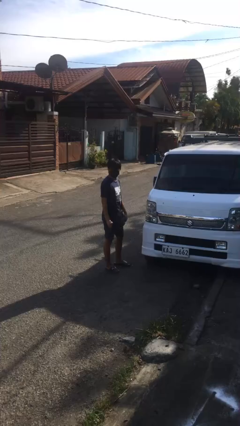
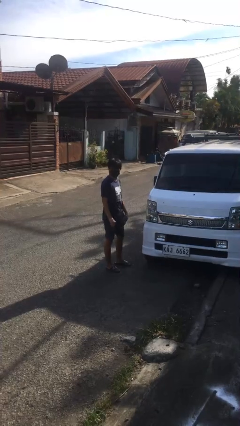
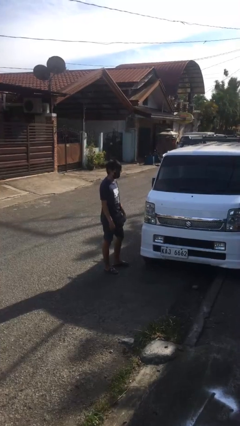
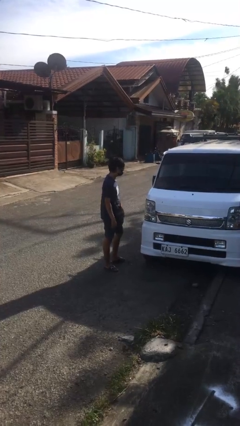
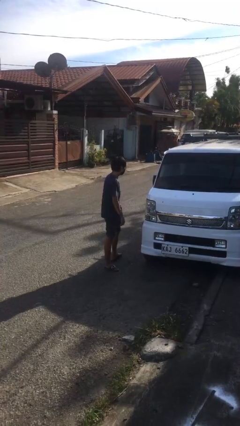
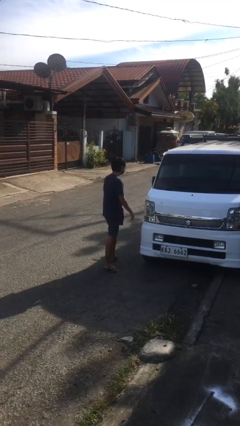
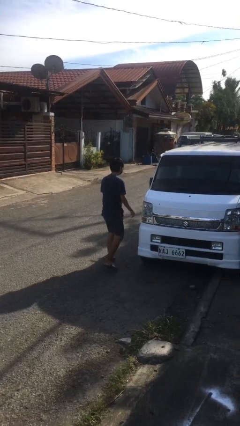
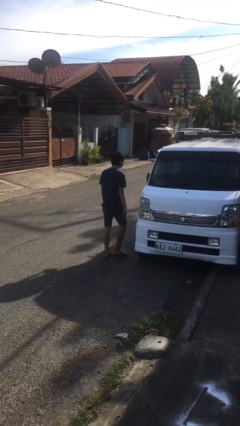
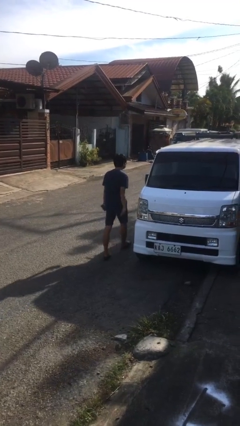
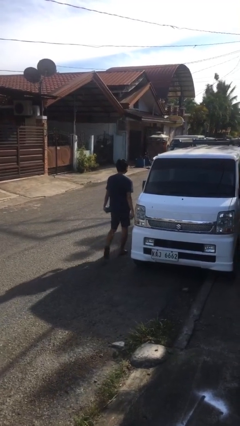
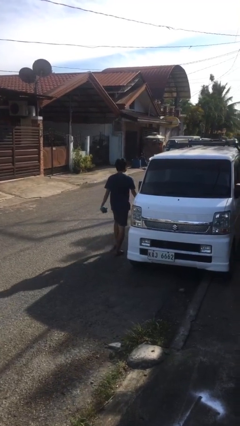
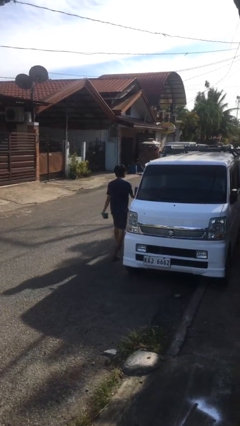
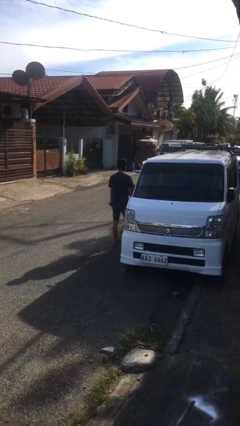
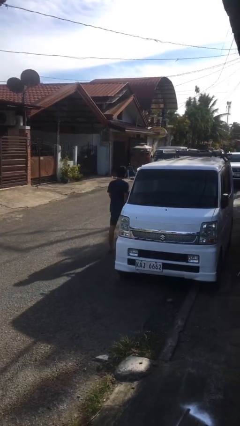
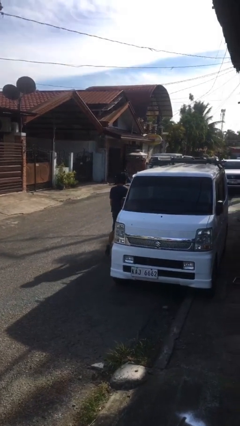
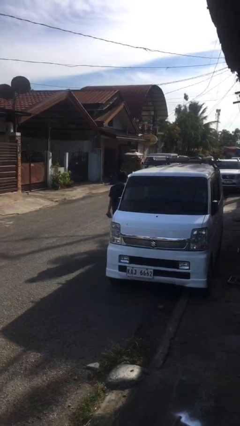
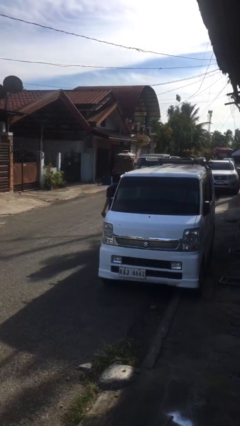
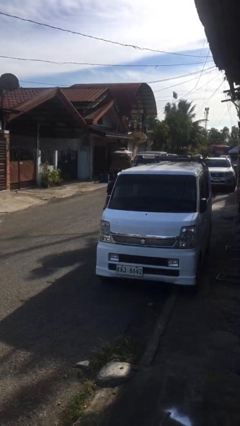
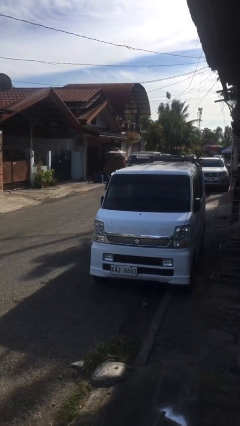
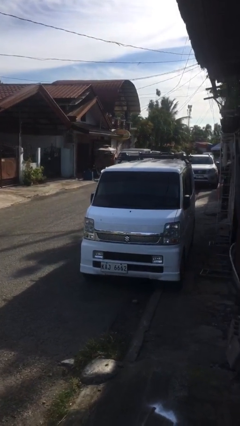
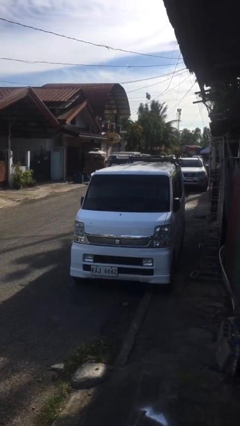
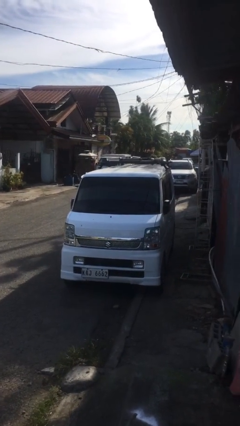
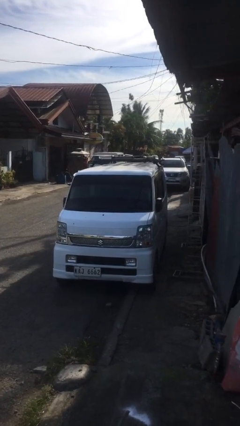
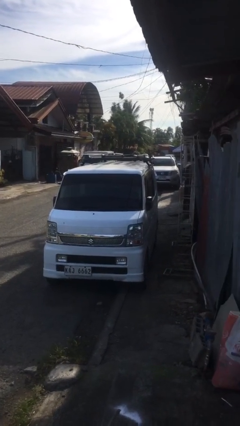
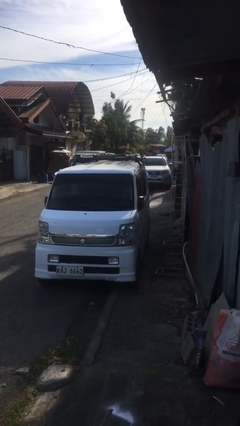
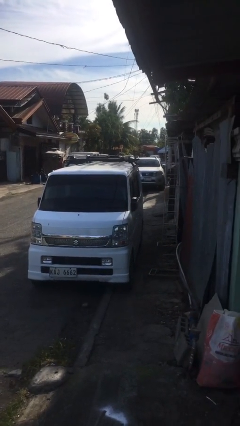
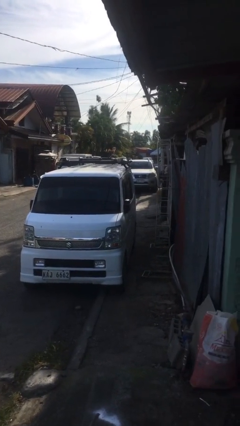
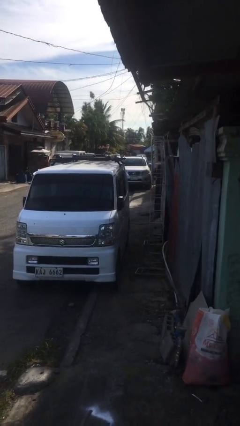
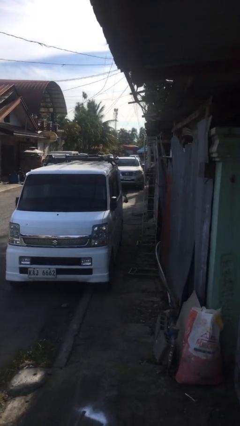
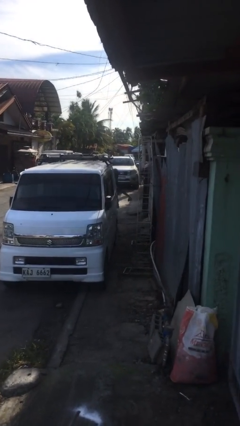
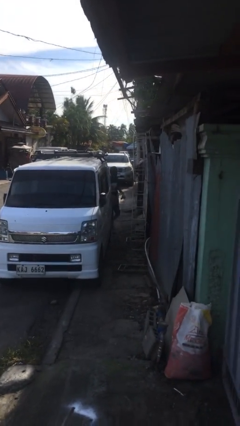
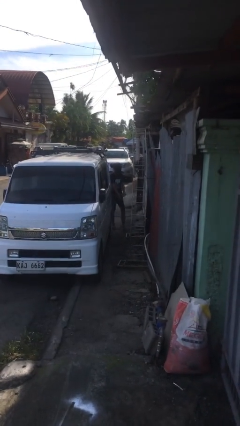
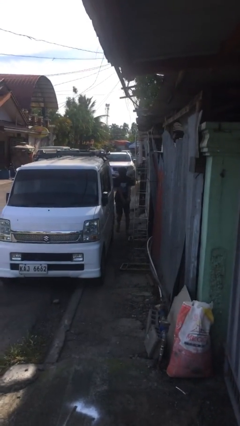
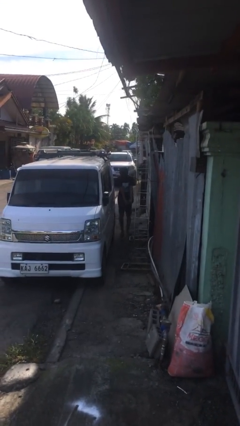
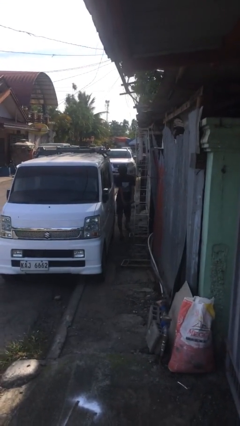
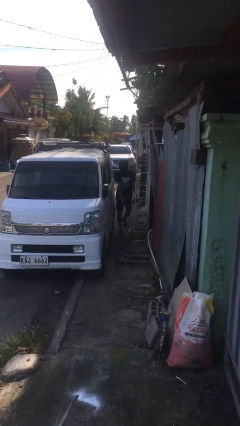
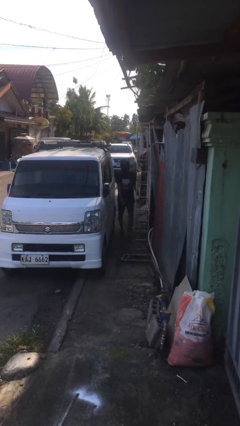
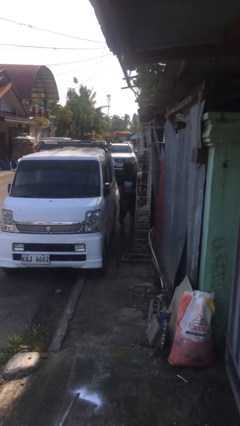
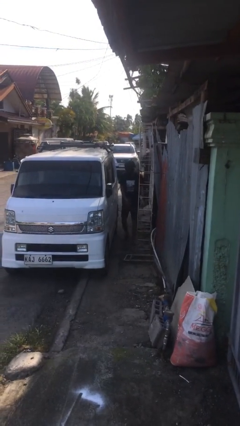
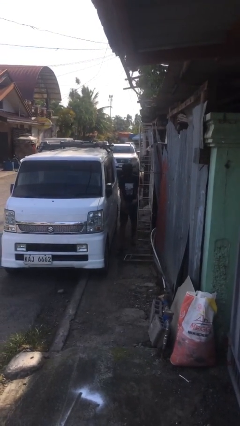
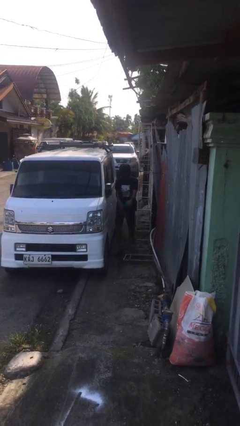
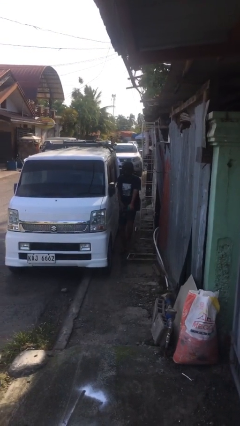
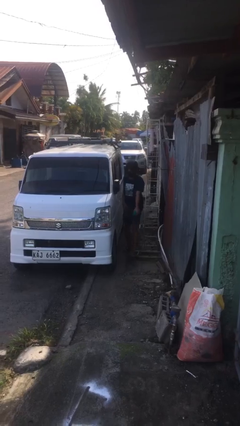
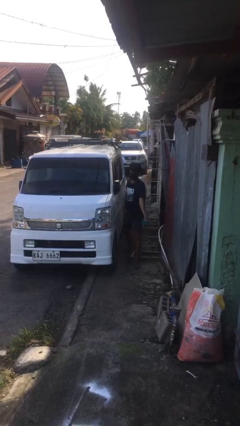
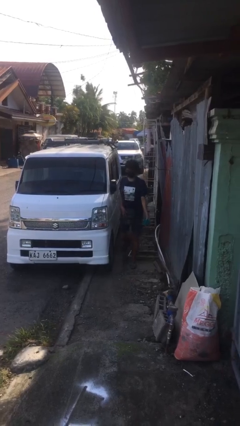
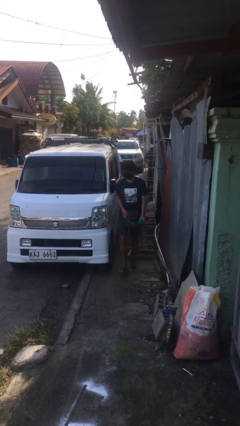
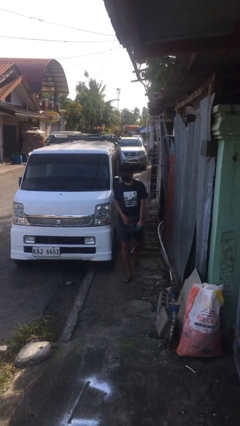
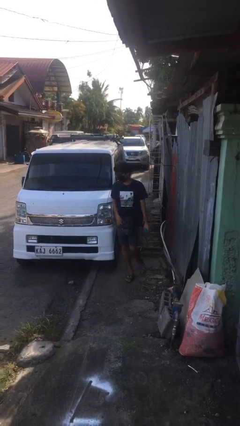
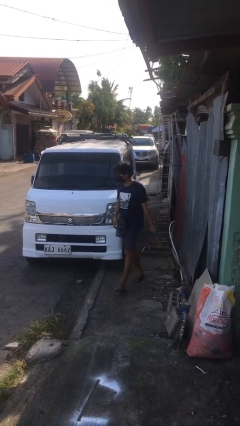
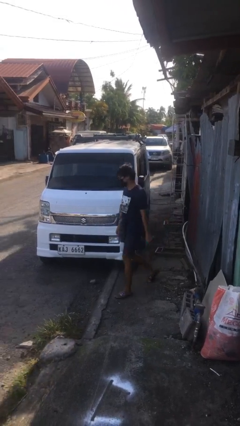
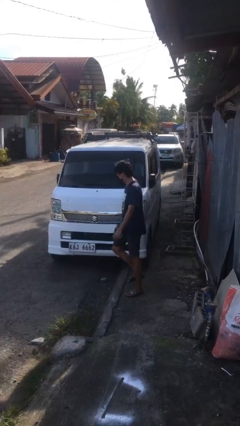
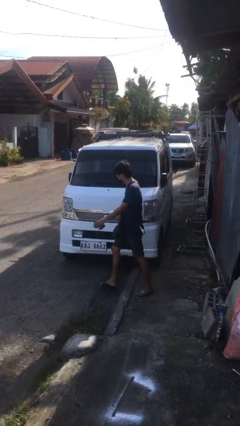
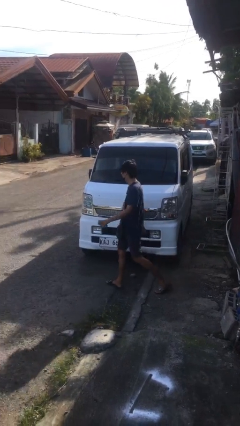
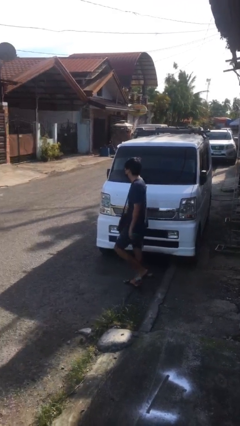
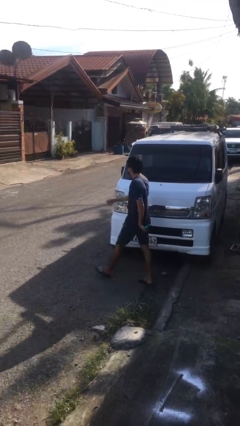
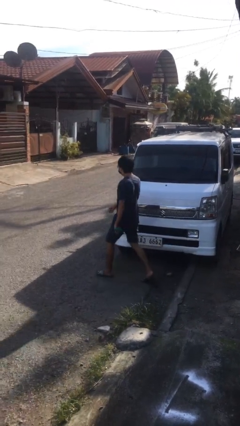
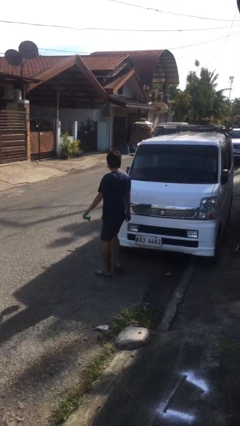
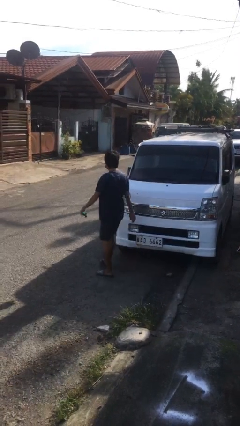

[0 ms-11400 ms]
person walks around car

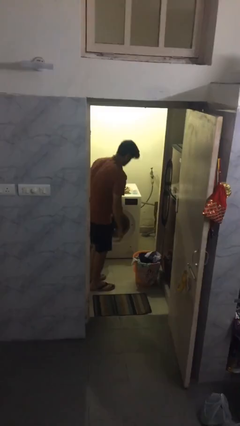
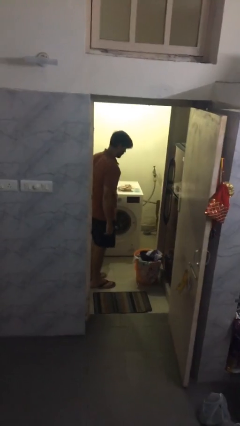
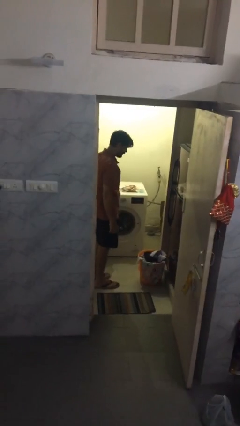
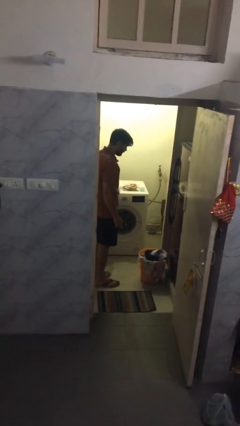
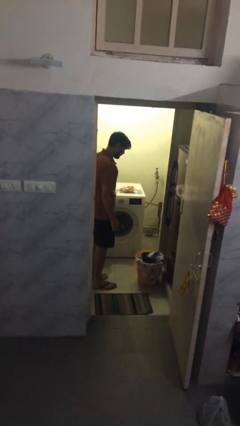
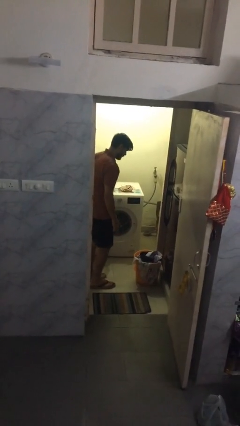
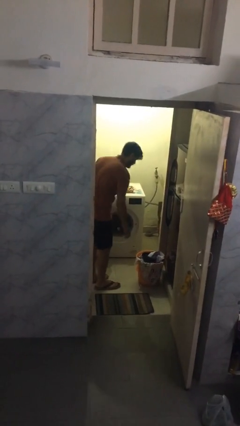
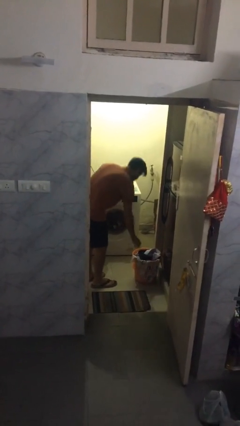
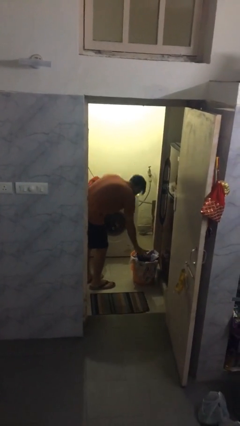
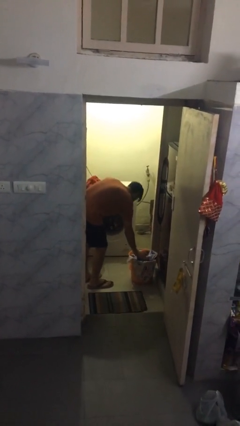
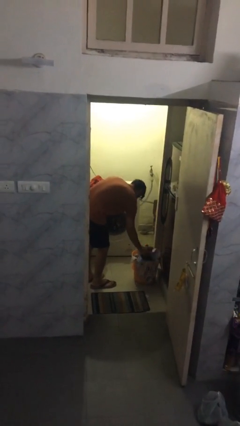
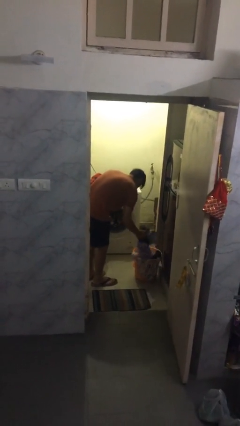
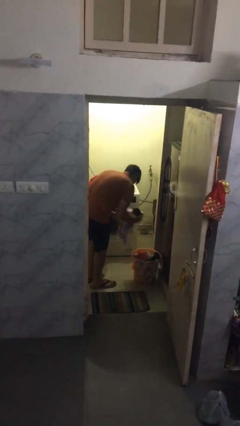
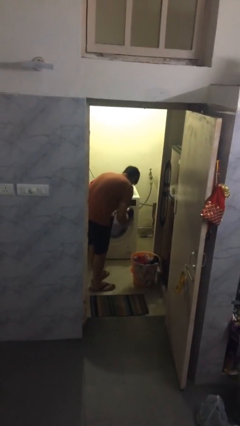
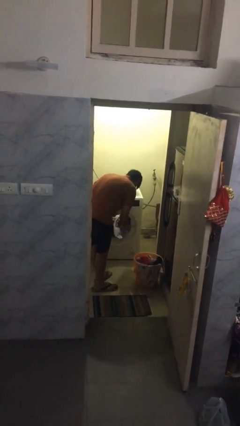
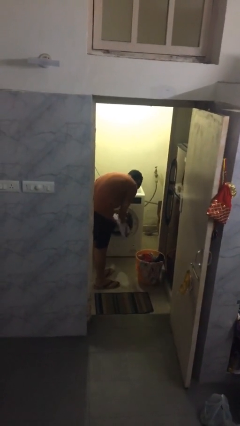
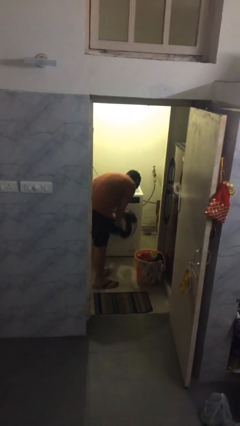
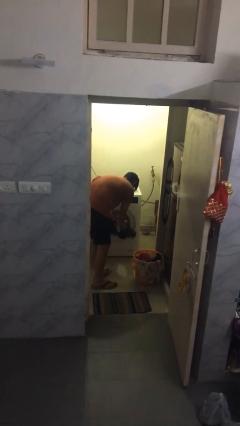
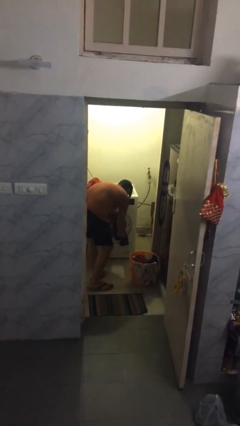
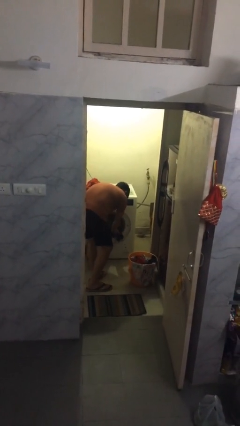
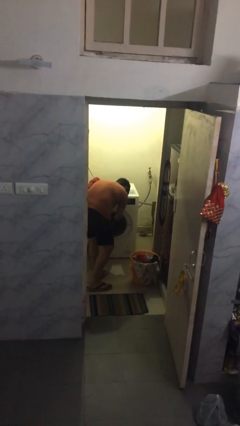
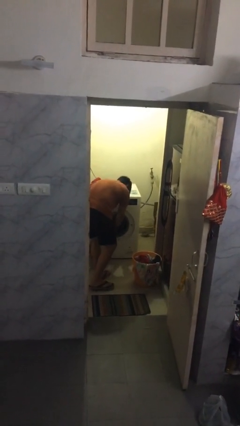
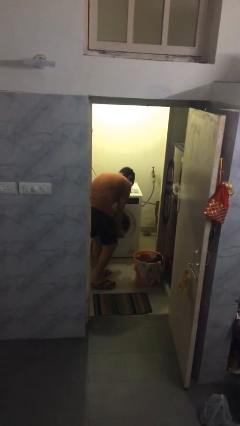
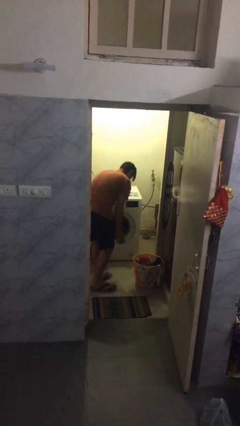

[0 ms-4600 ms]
person loads clotheswasher

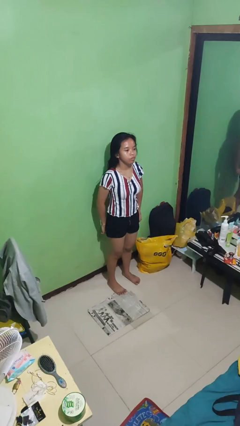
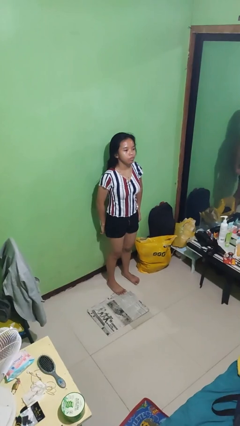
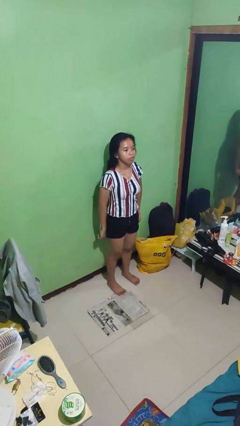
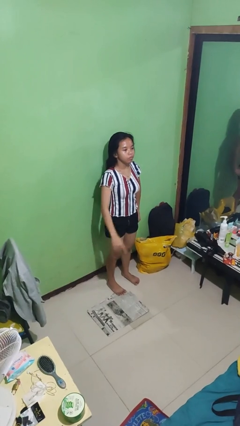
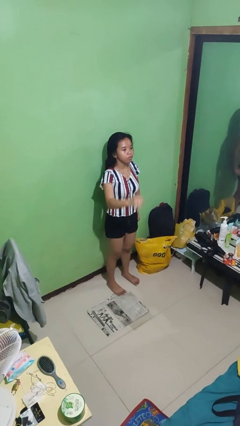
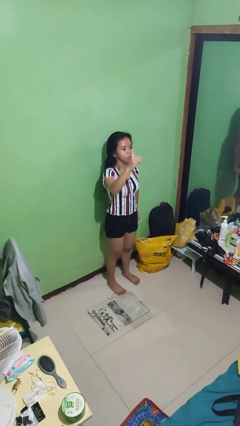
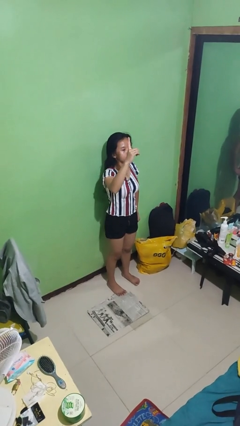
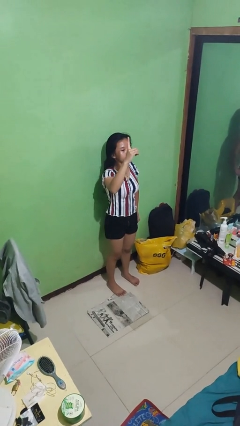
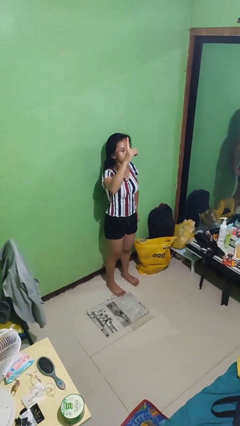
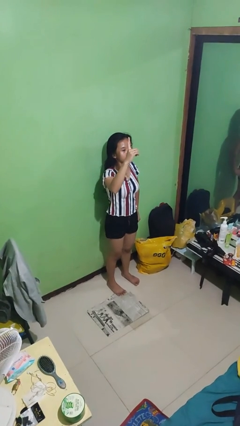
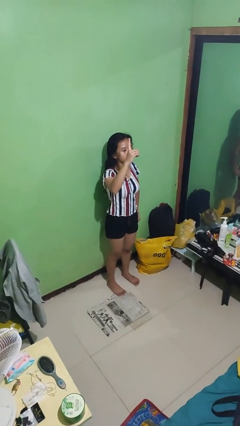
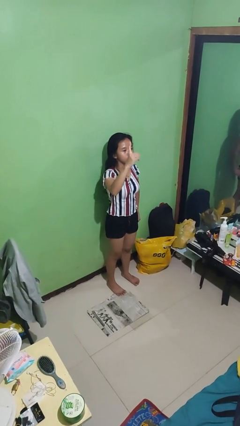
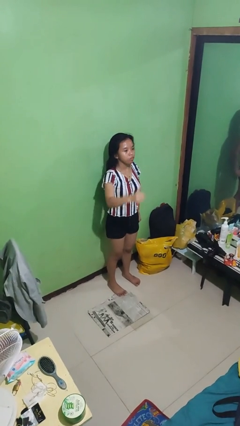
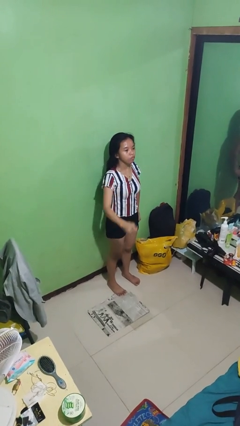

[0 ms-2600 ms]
person gestures number one
